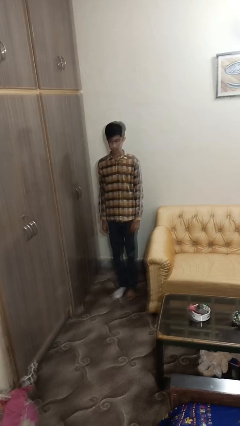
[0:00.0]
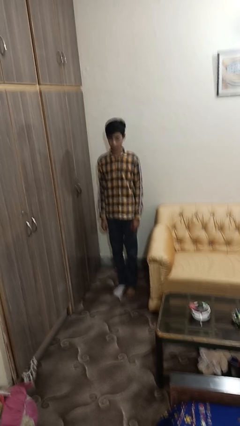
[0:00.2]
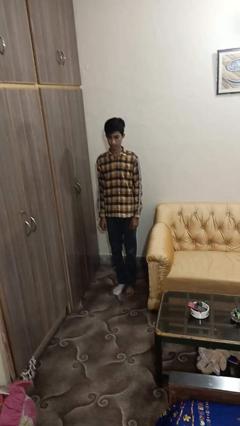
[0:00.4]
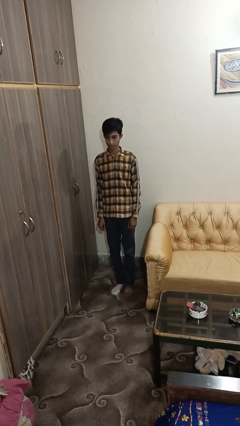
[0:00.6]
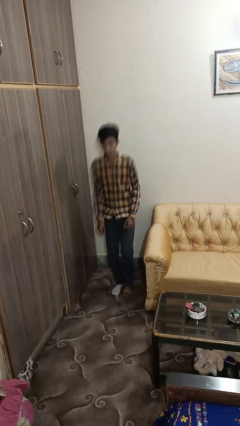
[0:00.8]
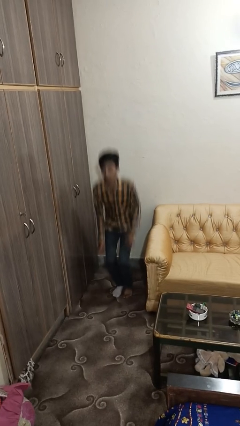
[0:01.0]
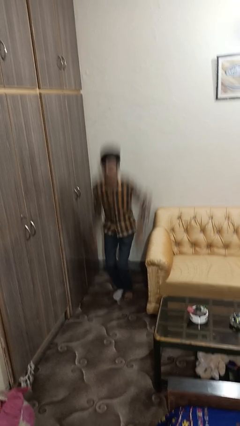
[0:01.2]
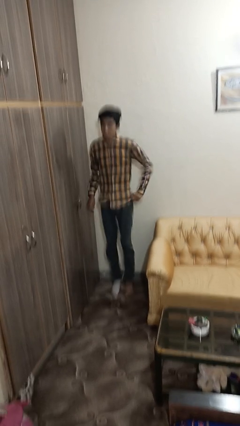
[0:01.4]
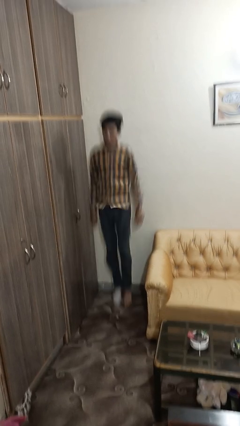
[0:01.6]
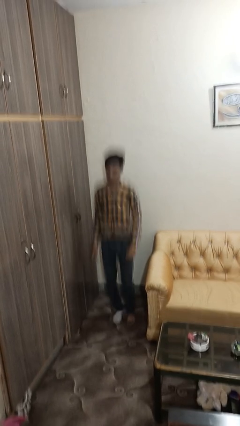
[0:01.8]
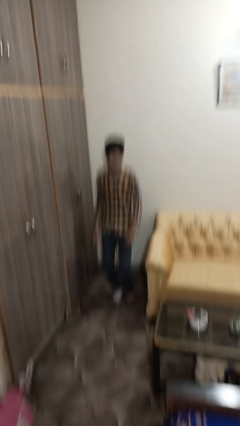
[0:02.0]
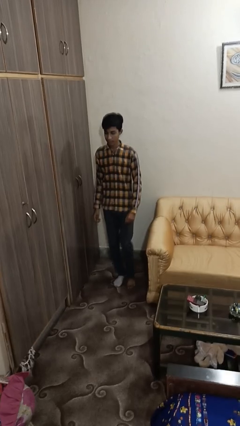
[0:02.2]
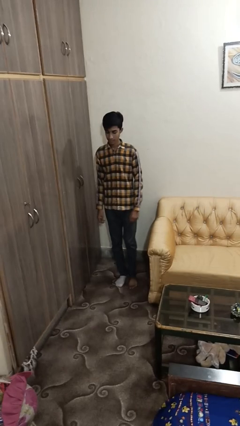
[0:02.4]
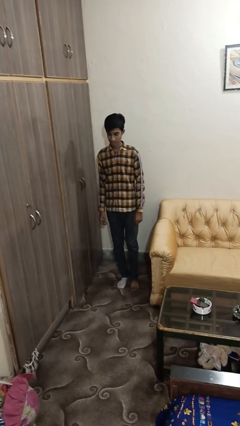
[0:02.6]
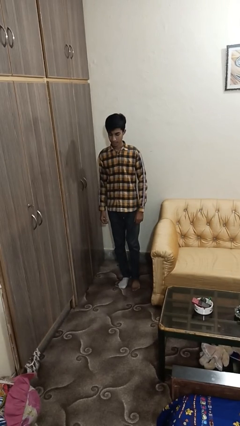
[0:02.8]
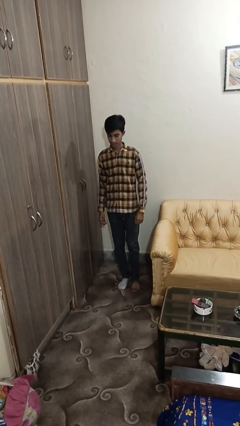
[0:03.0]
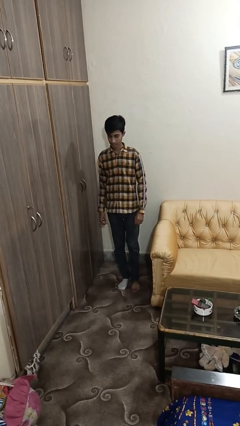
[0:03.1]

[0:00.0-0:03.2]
person jumps

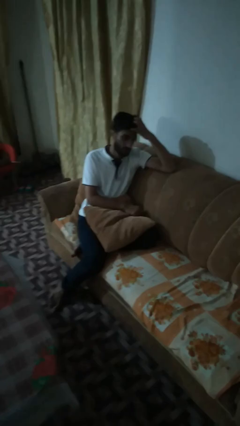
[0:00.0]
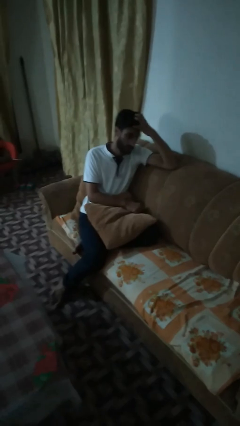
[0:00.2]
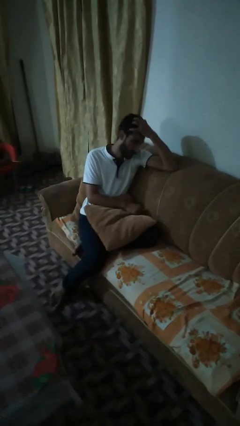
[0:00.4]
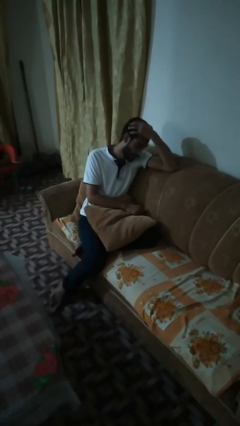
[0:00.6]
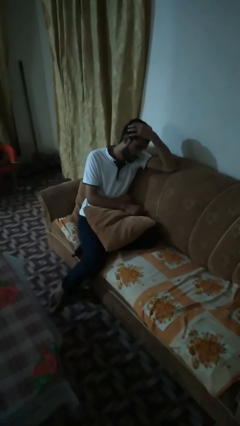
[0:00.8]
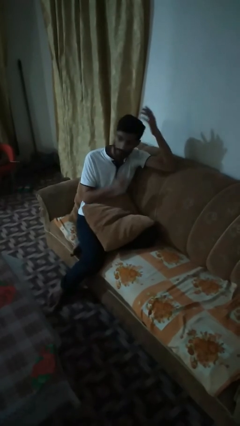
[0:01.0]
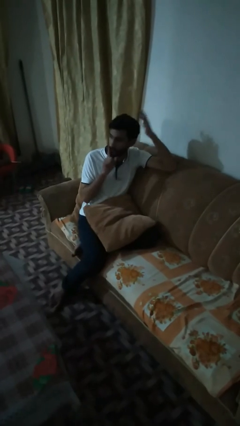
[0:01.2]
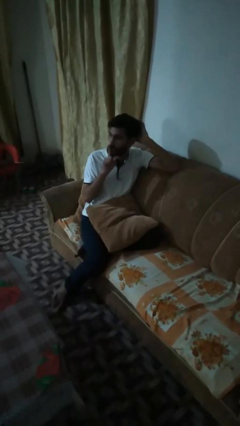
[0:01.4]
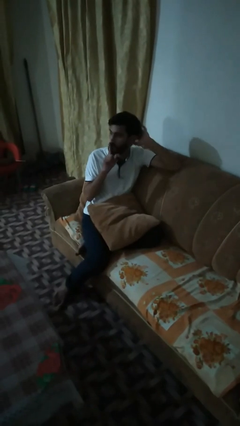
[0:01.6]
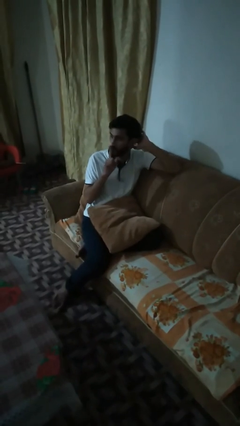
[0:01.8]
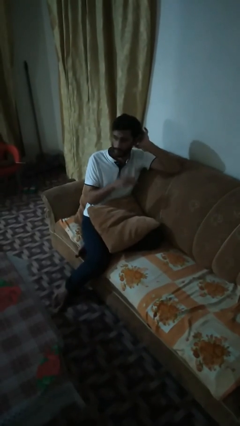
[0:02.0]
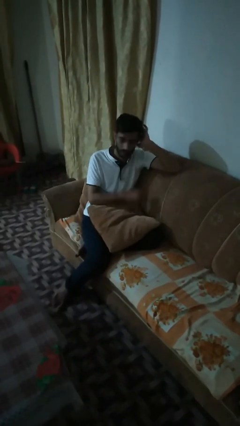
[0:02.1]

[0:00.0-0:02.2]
person gestures be quiet

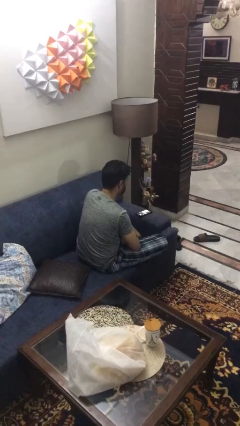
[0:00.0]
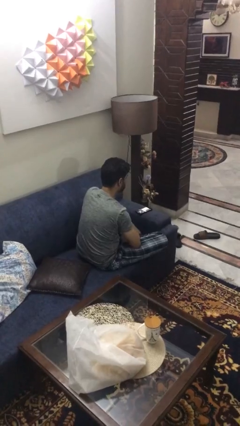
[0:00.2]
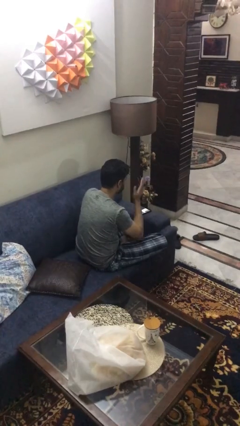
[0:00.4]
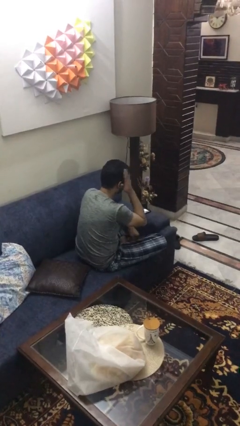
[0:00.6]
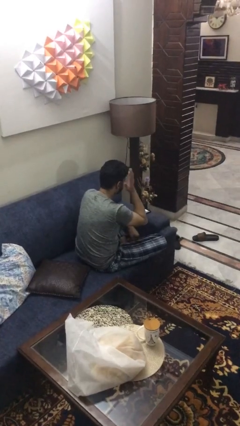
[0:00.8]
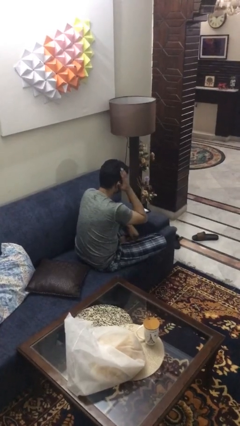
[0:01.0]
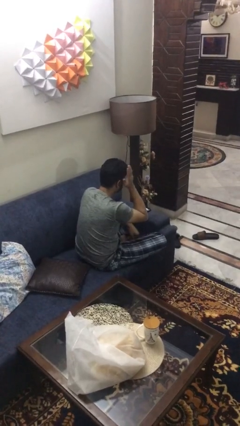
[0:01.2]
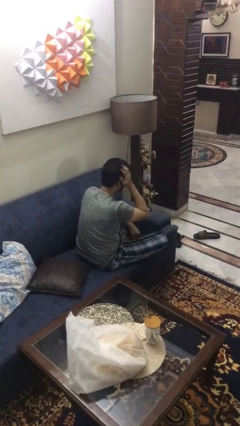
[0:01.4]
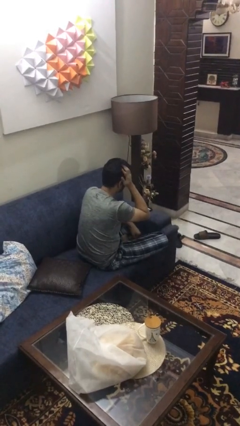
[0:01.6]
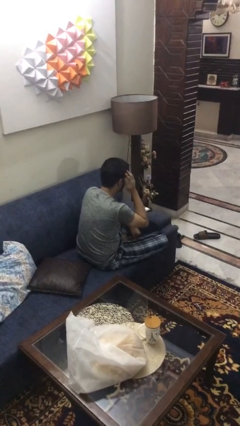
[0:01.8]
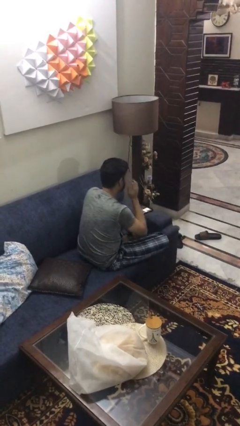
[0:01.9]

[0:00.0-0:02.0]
person strokes hair

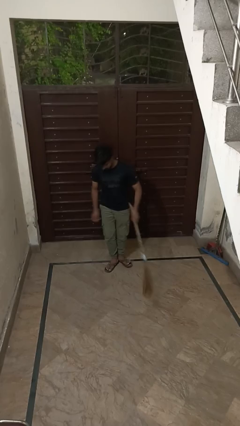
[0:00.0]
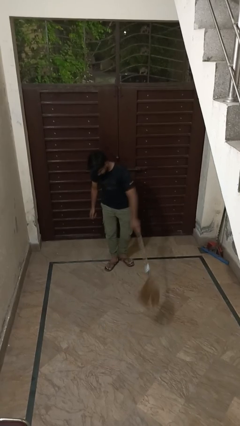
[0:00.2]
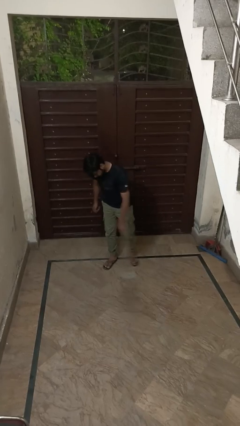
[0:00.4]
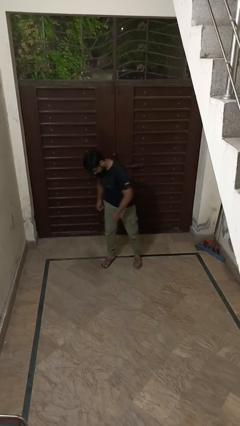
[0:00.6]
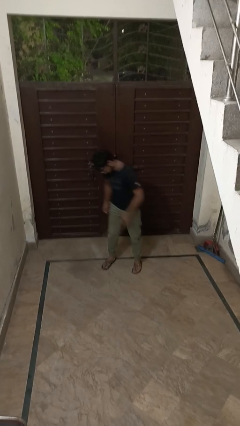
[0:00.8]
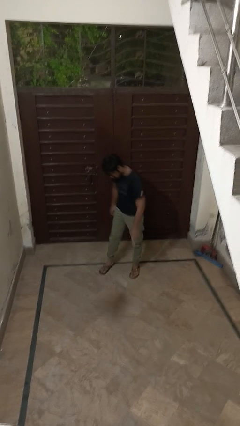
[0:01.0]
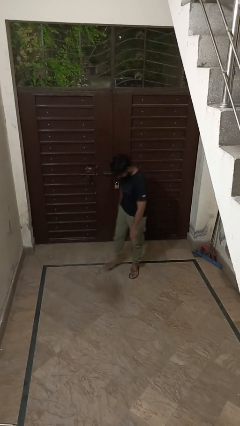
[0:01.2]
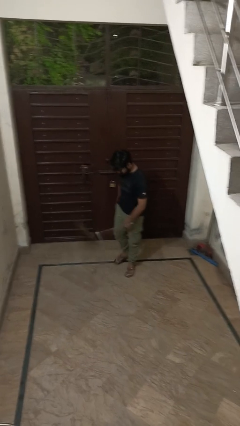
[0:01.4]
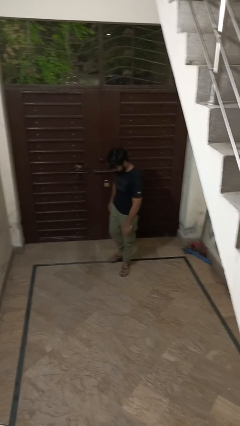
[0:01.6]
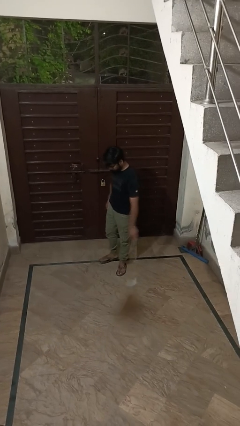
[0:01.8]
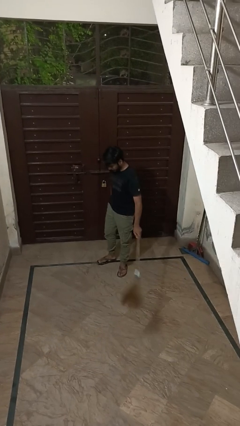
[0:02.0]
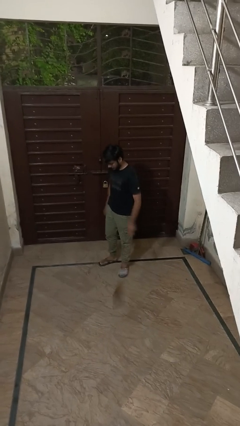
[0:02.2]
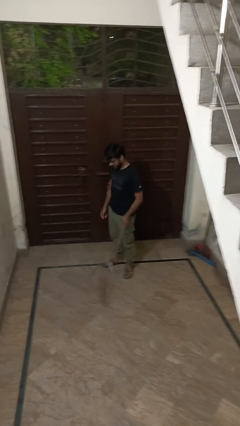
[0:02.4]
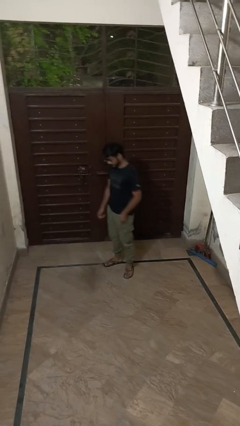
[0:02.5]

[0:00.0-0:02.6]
person sweeps floor

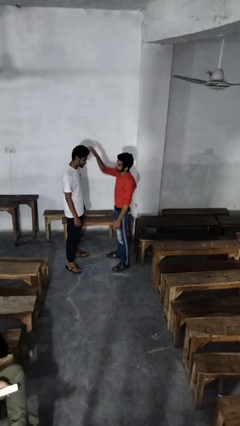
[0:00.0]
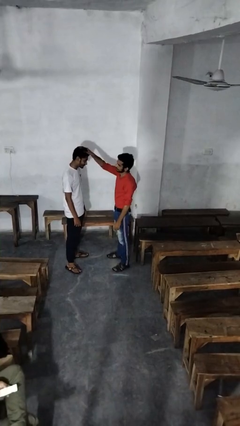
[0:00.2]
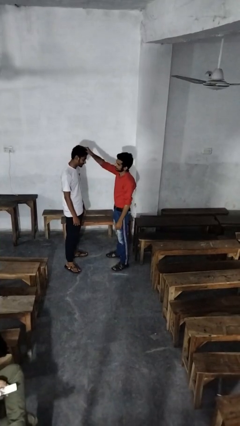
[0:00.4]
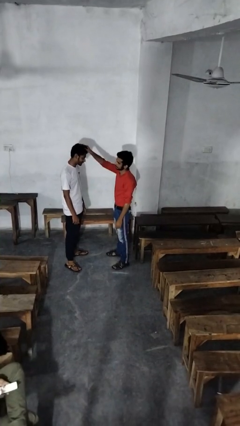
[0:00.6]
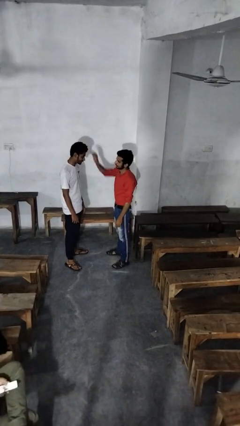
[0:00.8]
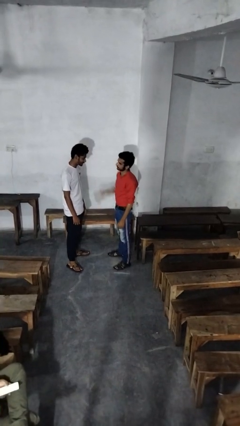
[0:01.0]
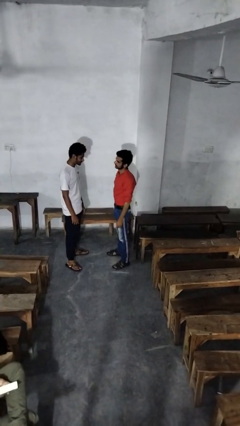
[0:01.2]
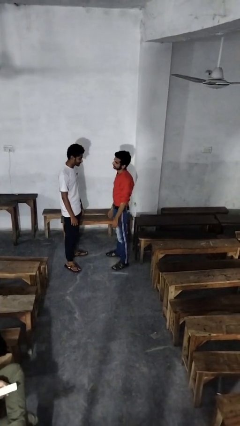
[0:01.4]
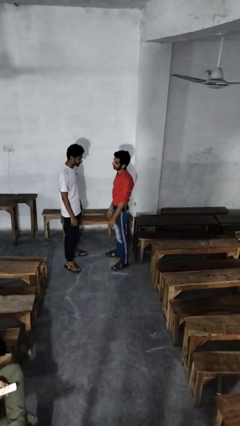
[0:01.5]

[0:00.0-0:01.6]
person grabs person by hair

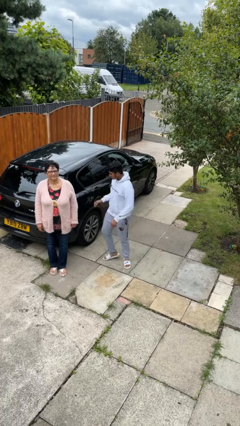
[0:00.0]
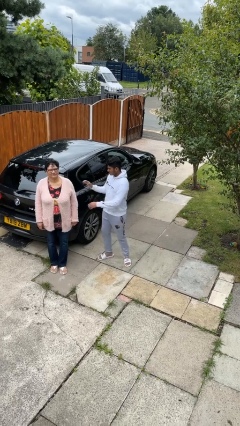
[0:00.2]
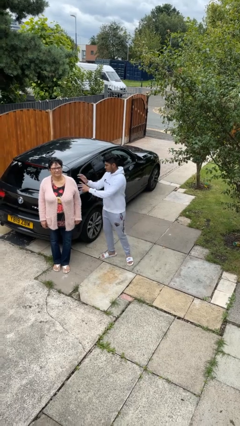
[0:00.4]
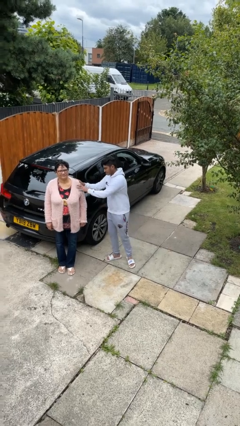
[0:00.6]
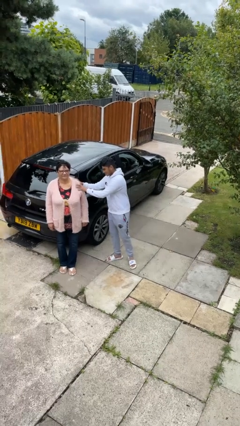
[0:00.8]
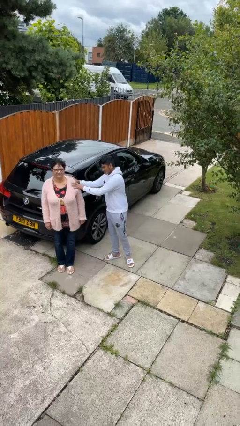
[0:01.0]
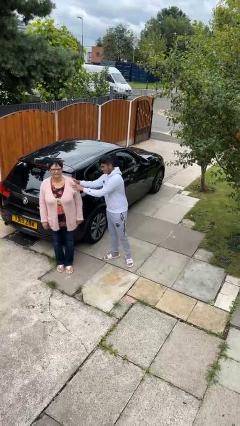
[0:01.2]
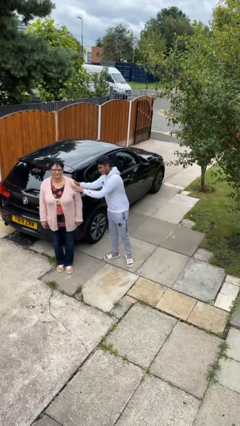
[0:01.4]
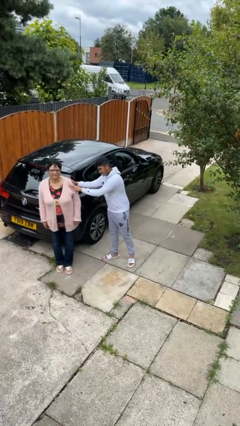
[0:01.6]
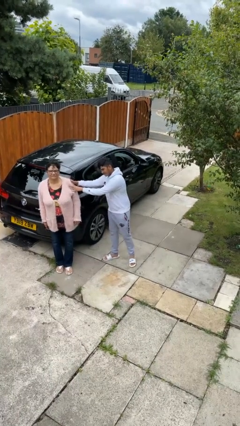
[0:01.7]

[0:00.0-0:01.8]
person shoves person

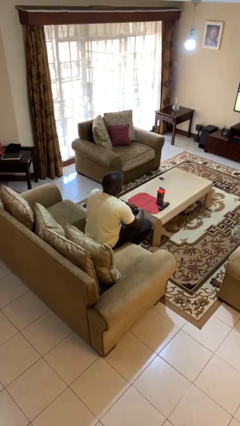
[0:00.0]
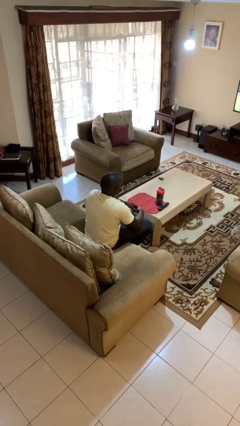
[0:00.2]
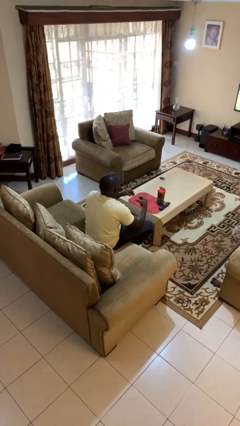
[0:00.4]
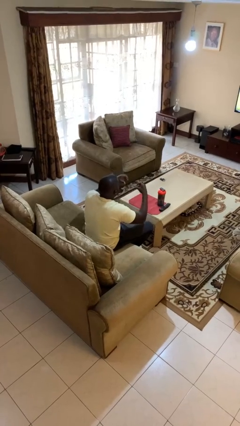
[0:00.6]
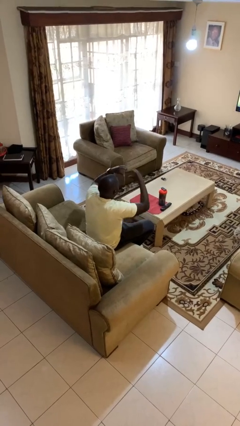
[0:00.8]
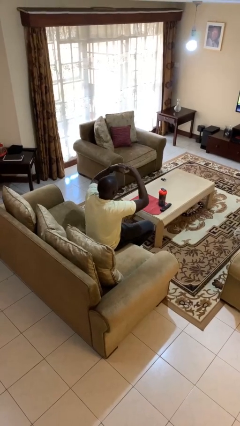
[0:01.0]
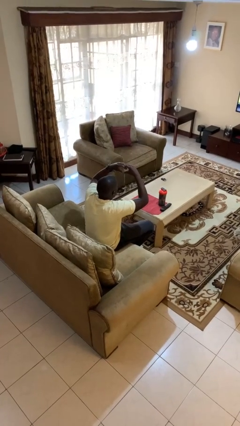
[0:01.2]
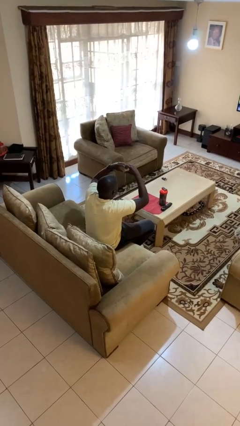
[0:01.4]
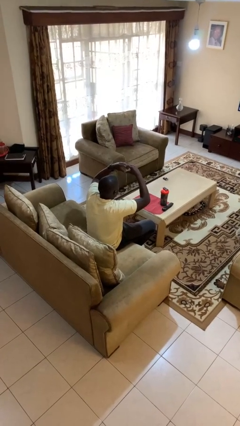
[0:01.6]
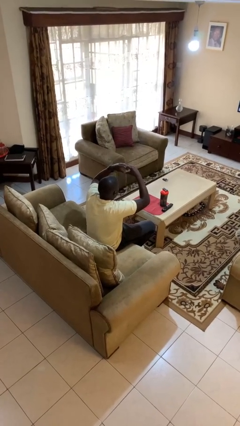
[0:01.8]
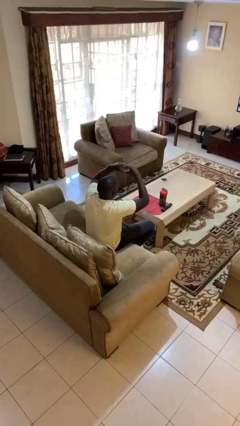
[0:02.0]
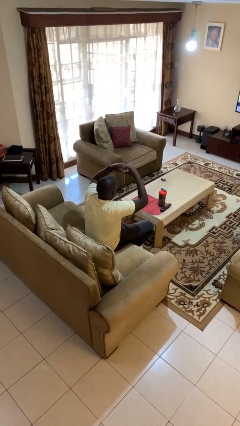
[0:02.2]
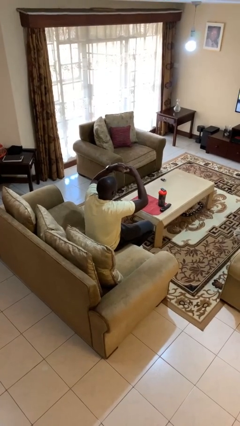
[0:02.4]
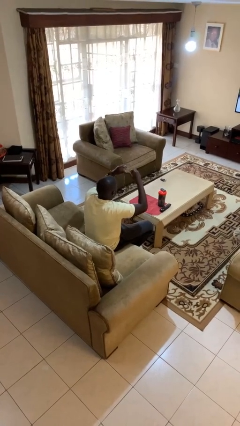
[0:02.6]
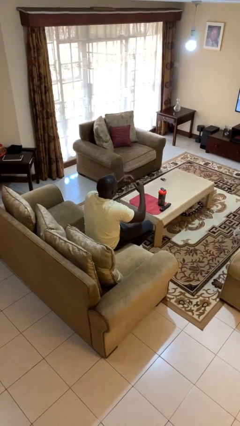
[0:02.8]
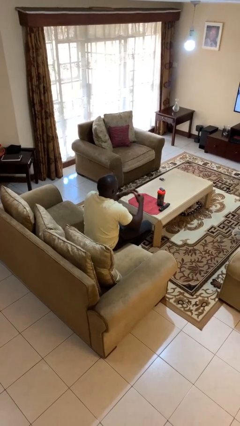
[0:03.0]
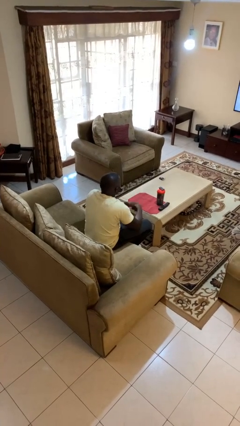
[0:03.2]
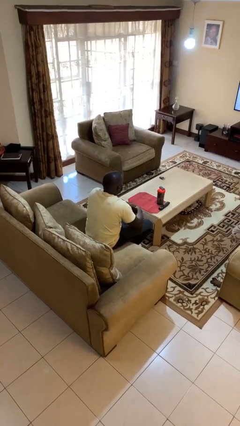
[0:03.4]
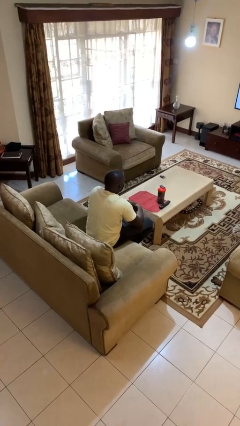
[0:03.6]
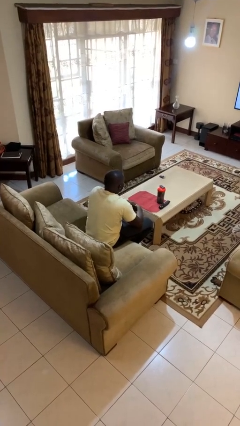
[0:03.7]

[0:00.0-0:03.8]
person gestures heart
